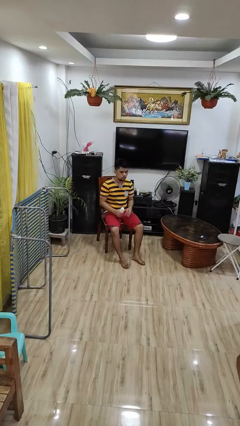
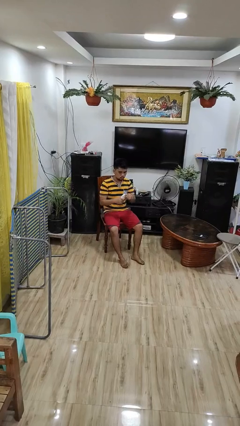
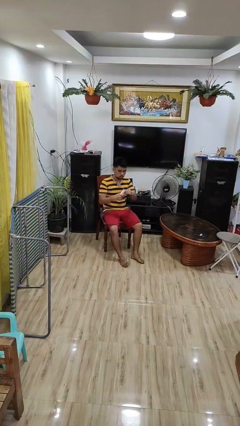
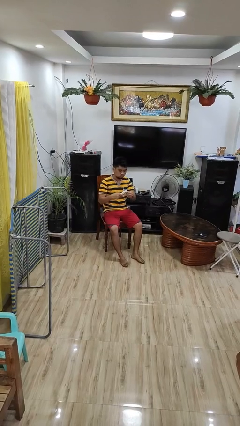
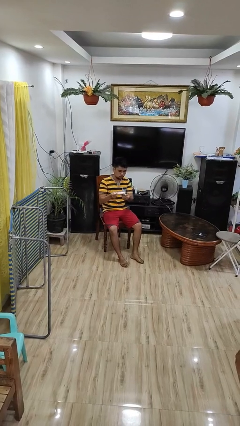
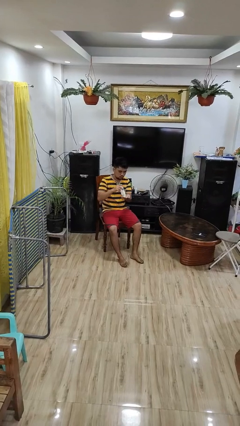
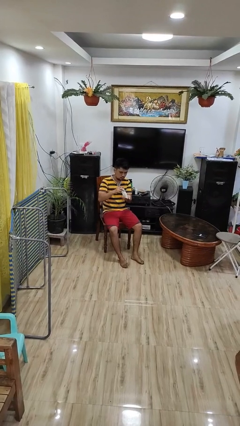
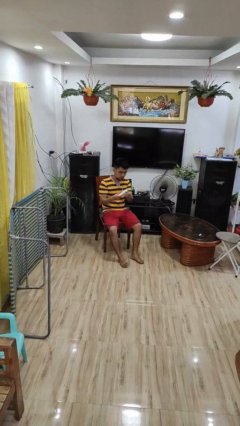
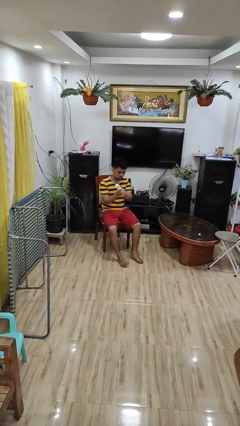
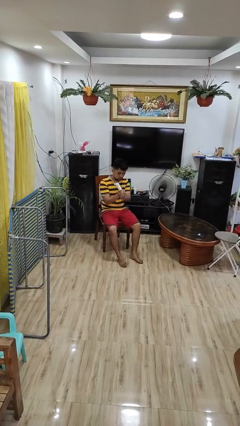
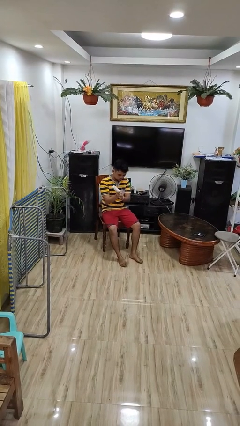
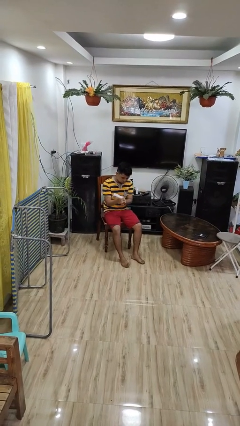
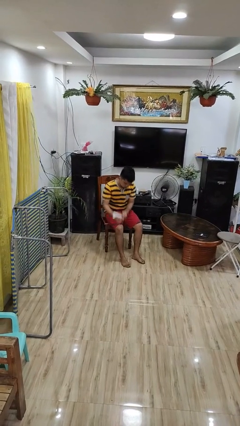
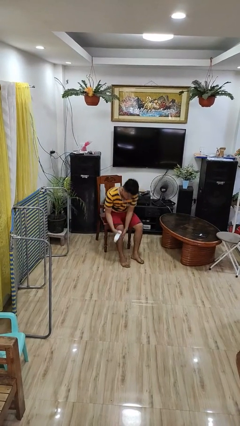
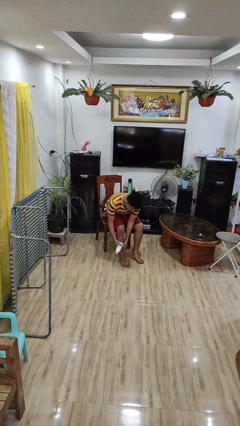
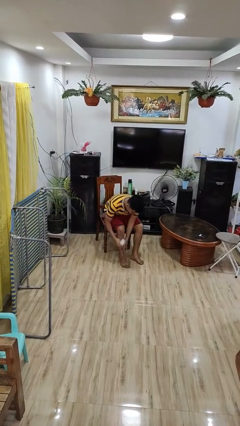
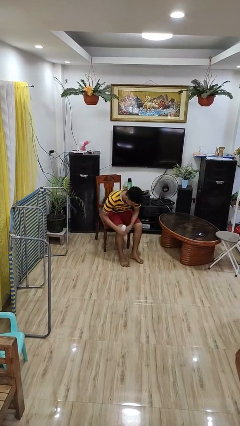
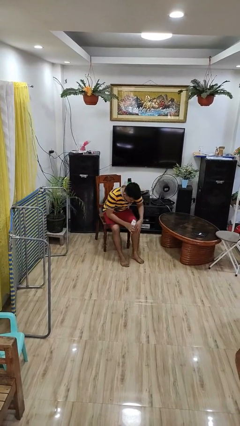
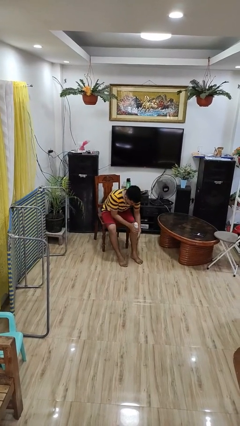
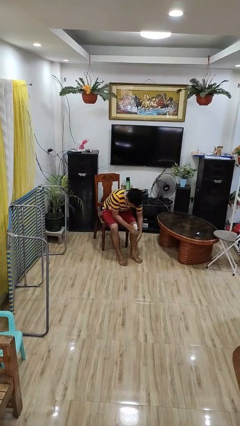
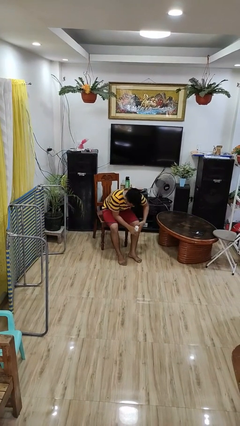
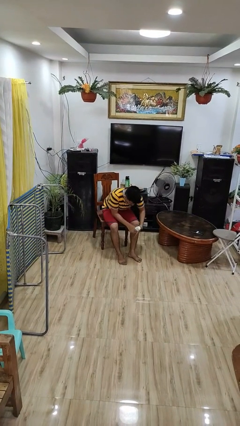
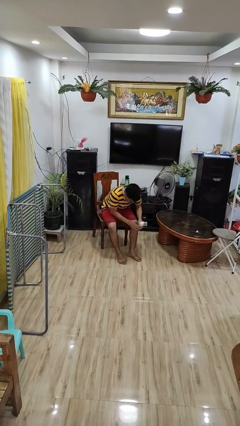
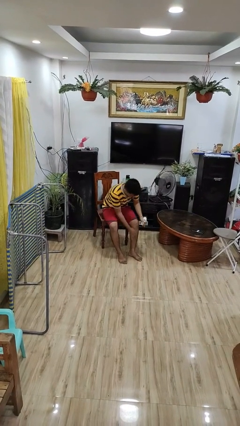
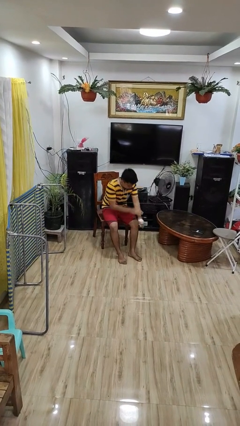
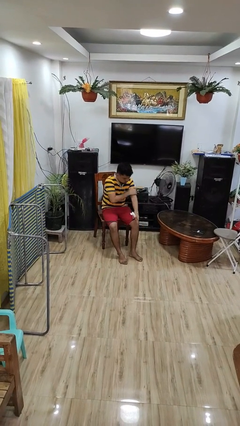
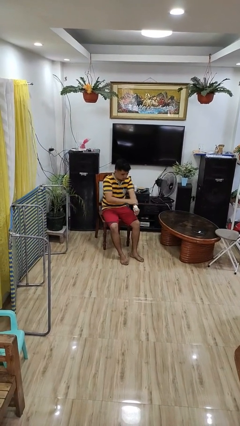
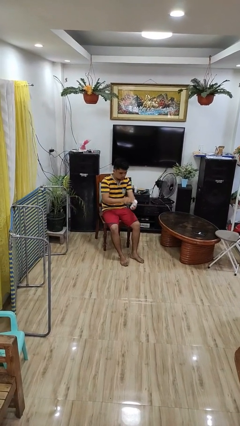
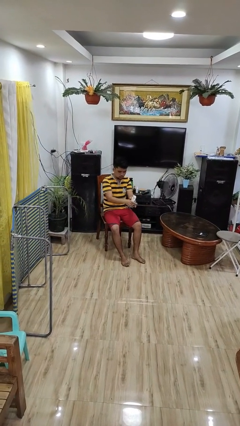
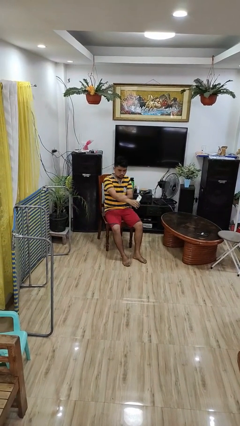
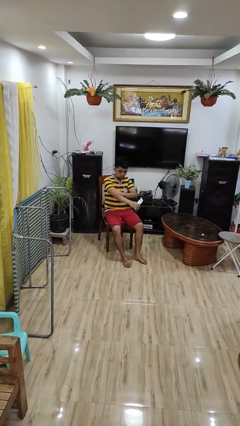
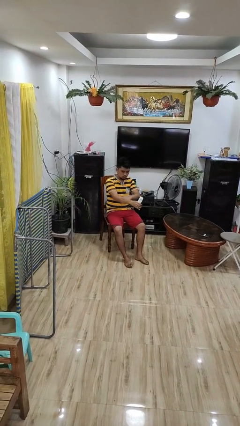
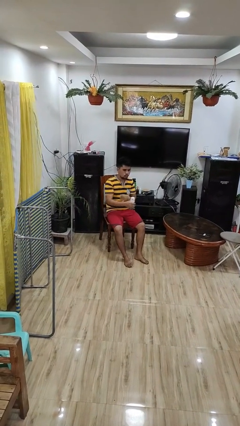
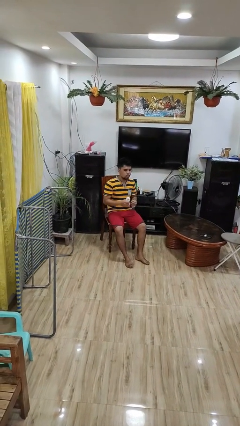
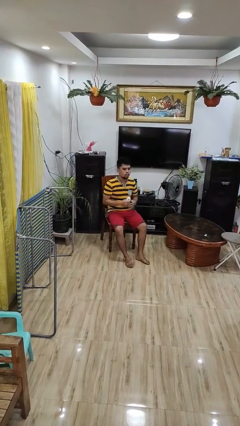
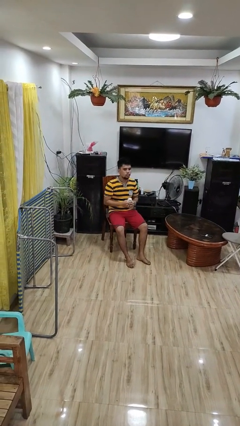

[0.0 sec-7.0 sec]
person applies sunscreen

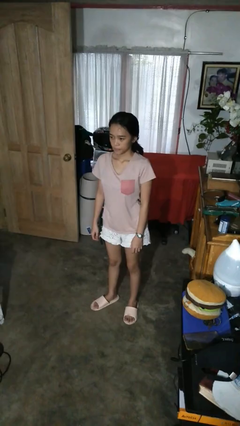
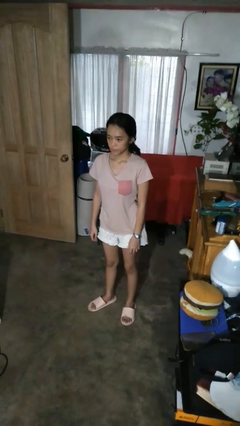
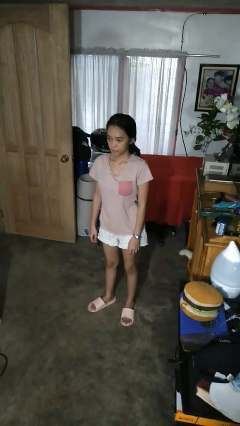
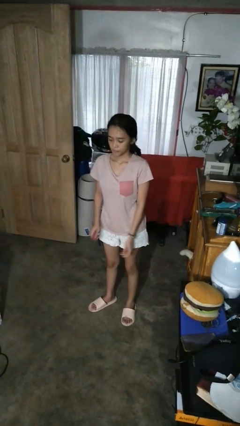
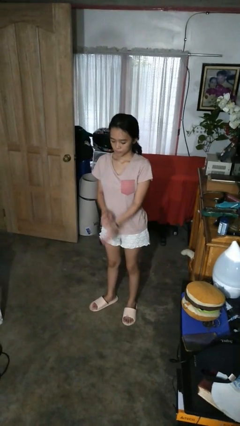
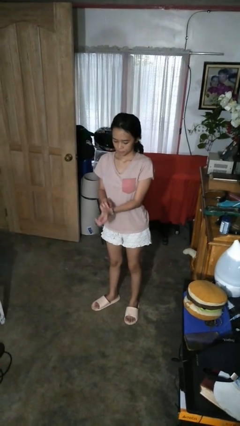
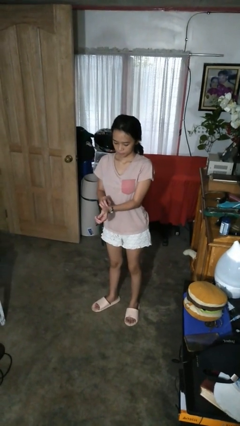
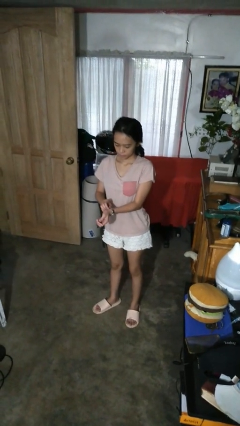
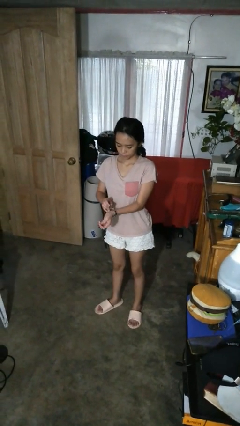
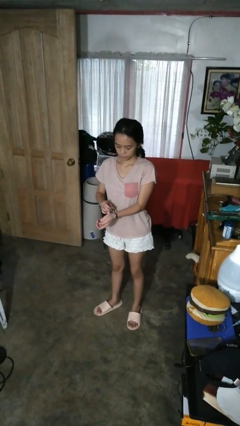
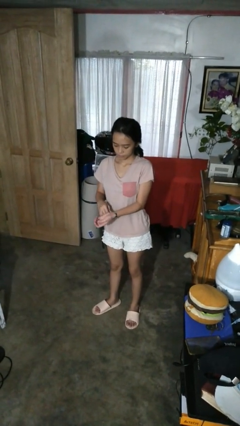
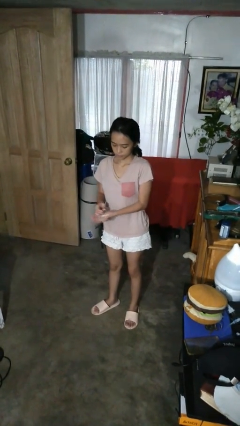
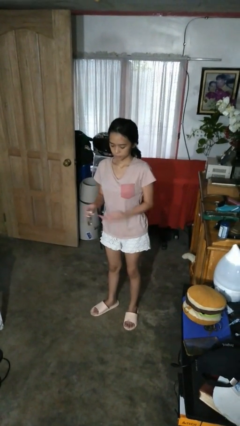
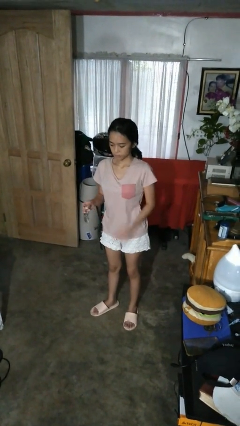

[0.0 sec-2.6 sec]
person takes off wristwatch

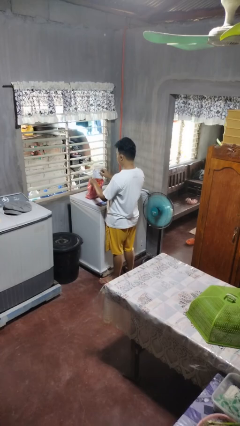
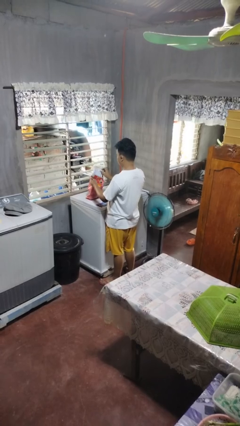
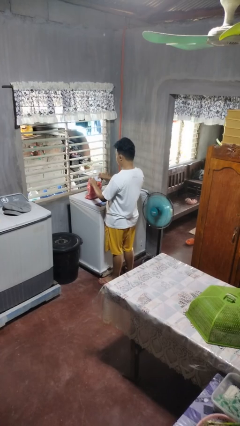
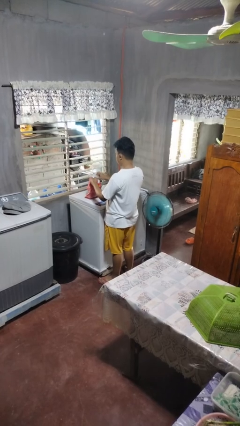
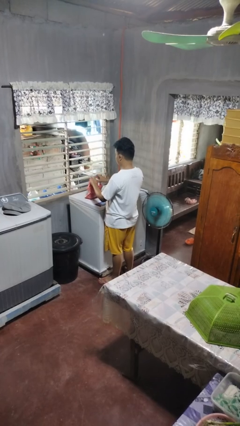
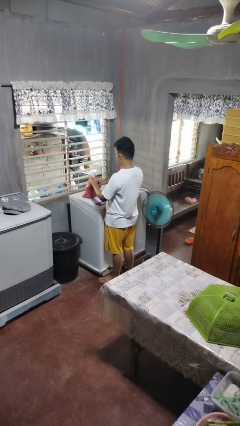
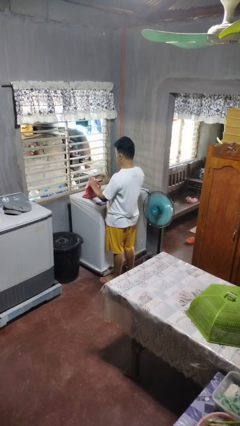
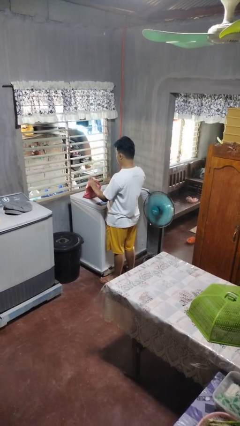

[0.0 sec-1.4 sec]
person puts object into bag

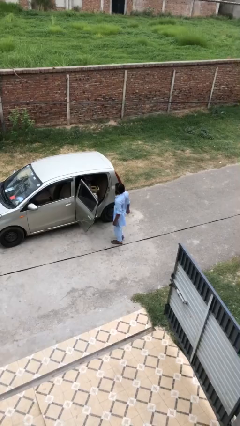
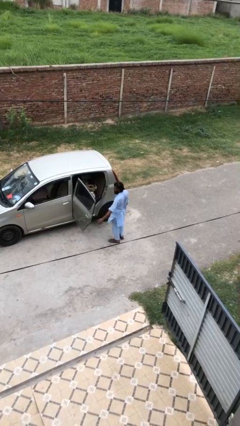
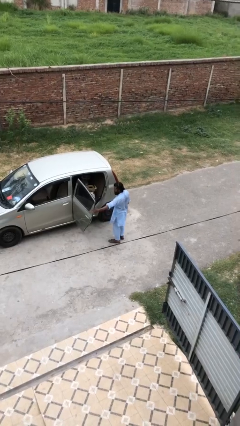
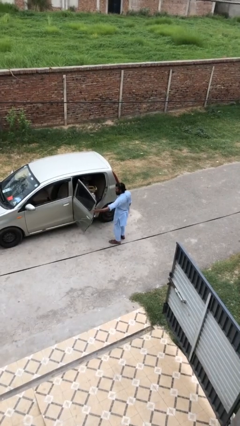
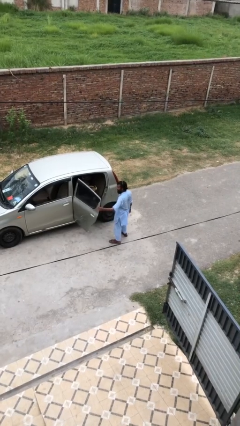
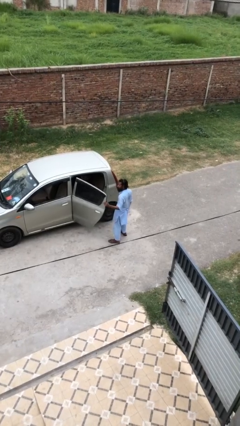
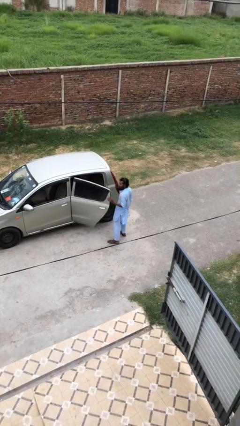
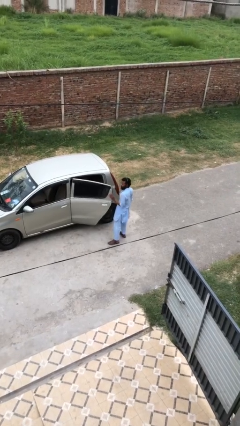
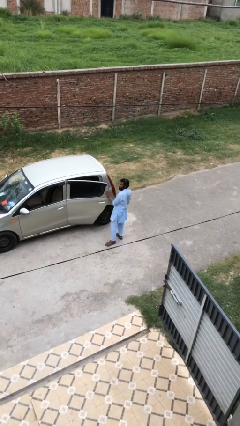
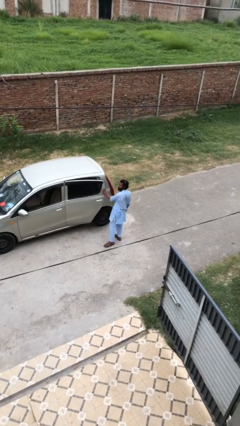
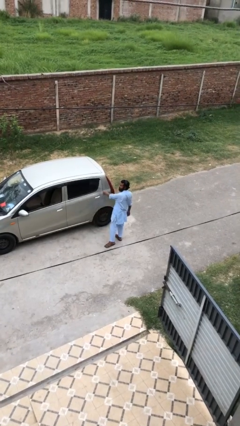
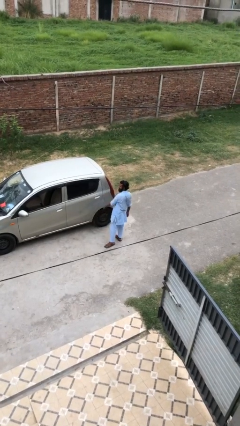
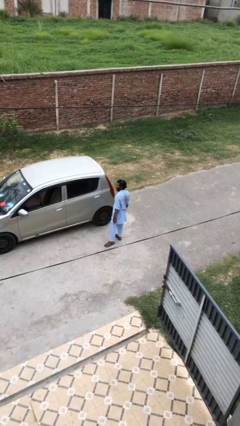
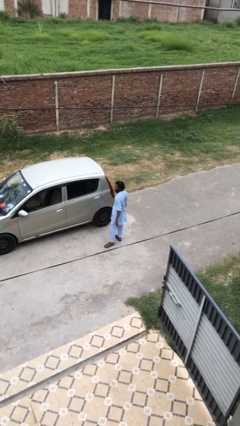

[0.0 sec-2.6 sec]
person closes car door

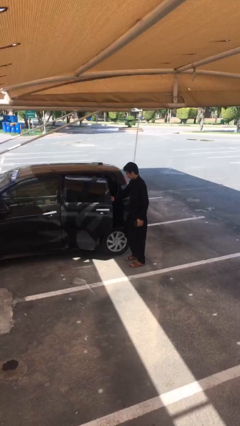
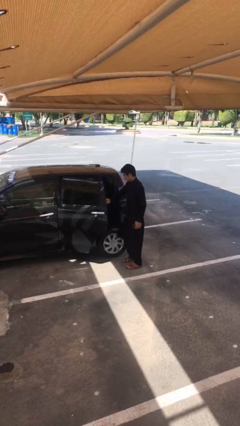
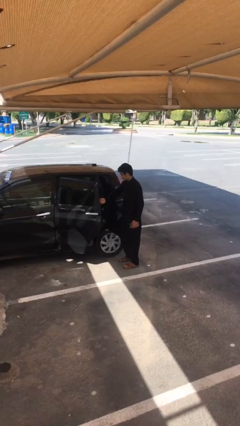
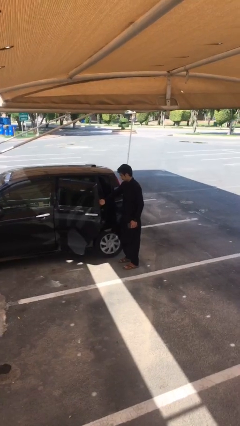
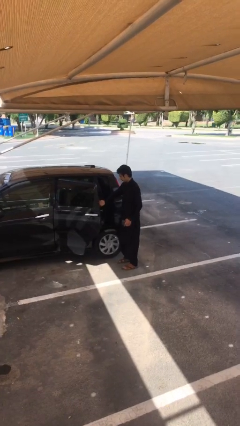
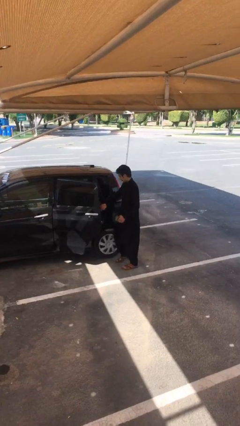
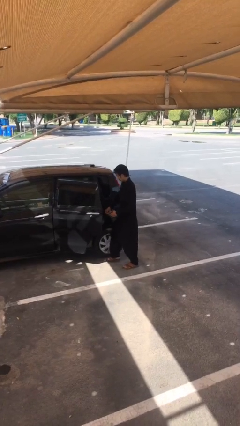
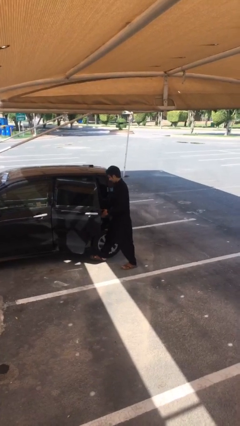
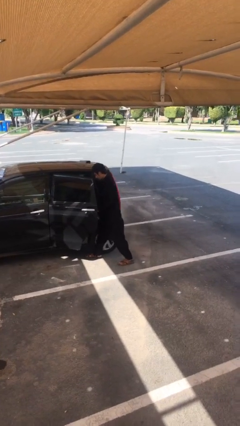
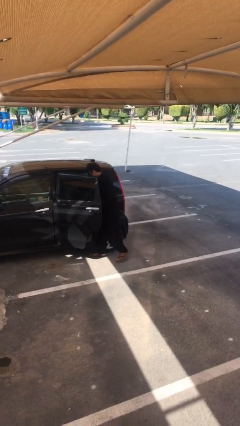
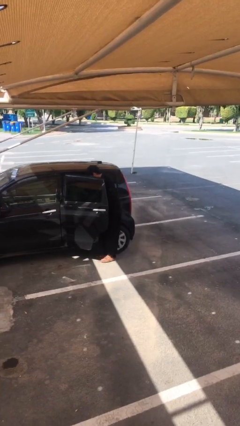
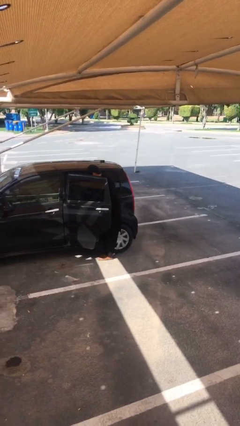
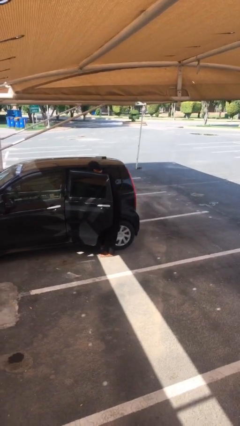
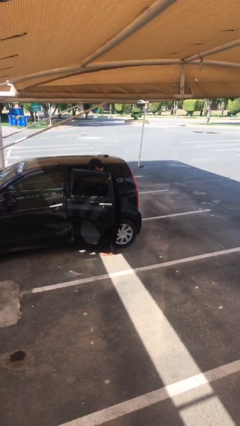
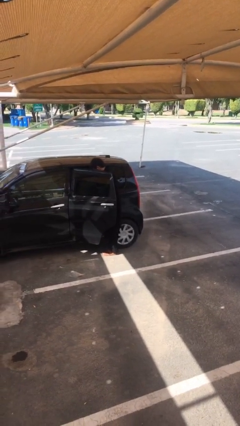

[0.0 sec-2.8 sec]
person enters car

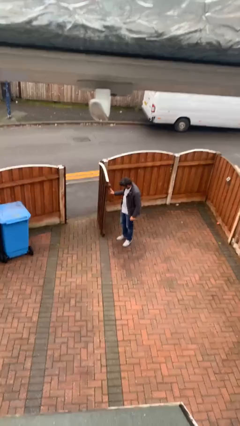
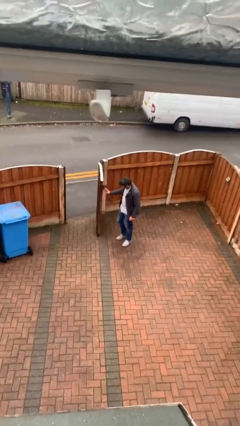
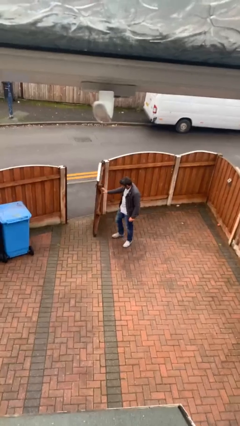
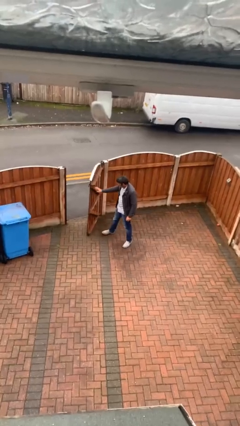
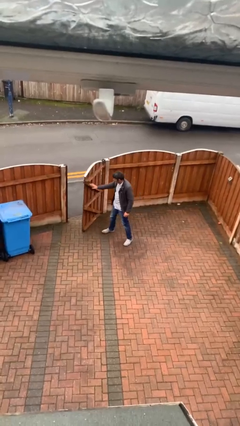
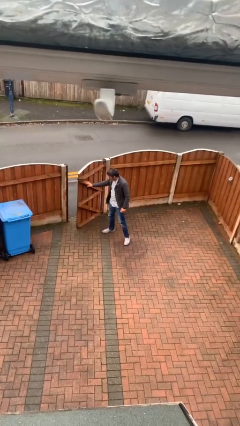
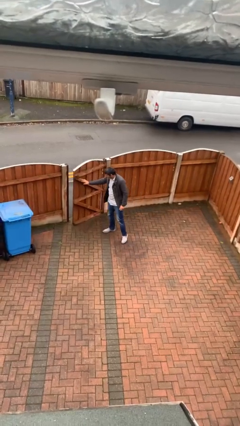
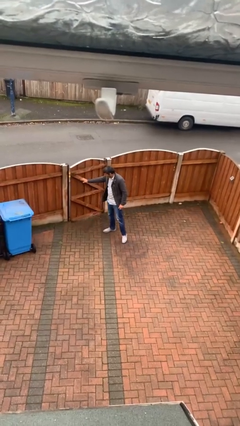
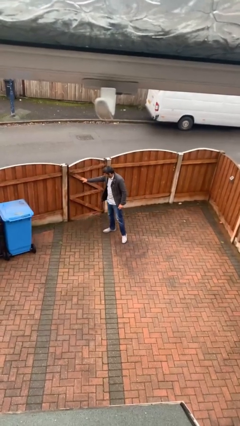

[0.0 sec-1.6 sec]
person closes facility door
